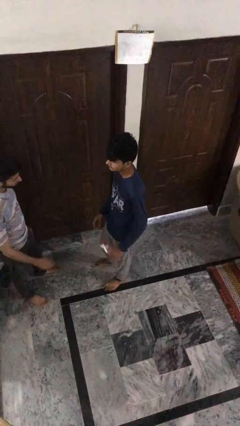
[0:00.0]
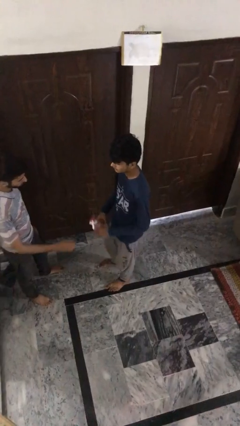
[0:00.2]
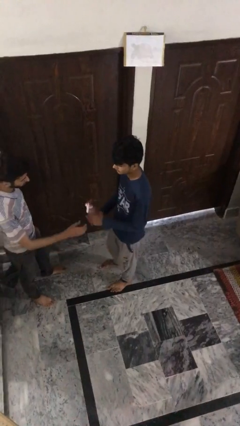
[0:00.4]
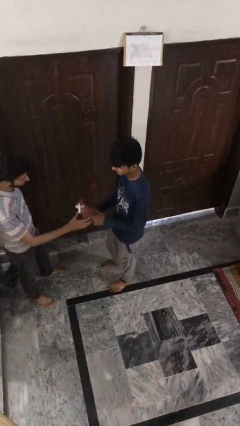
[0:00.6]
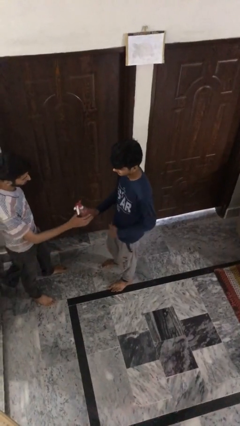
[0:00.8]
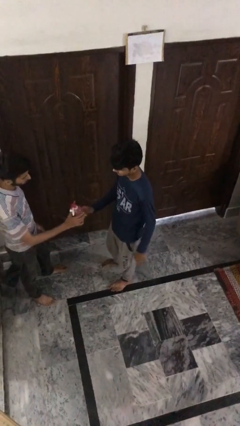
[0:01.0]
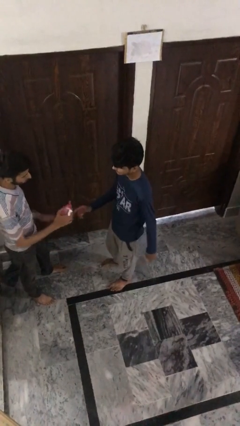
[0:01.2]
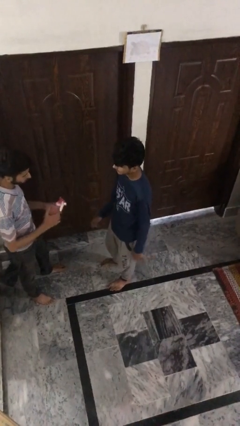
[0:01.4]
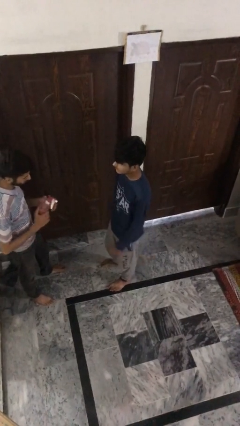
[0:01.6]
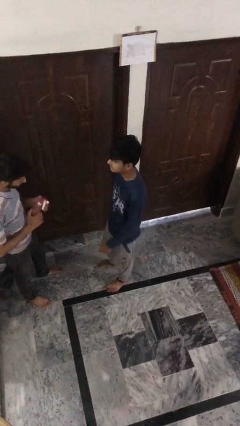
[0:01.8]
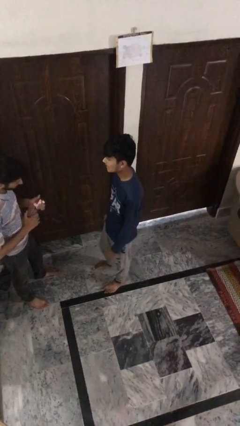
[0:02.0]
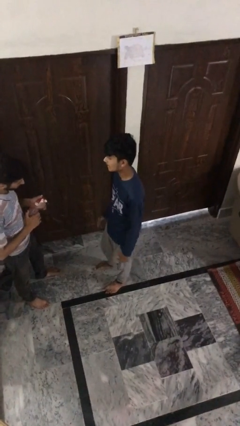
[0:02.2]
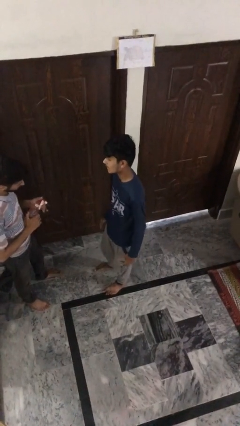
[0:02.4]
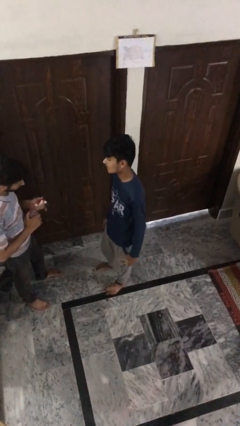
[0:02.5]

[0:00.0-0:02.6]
person transfers object to person

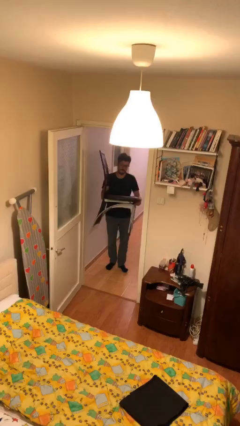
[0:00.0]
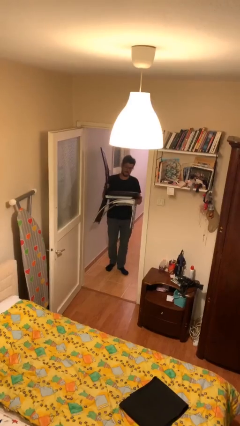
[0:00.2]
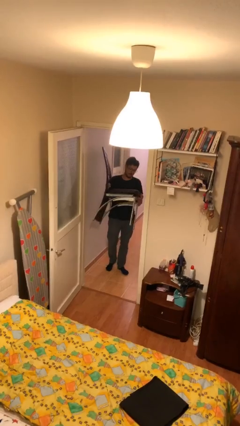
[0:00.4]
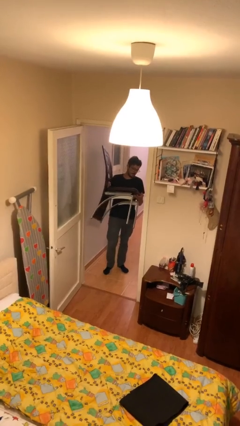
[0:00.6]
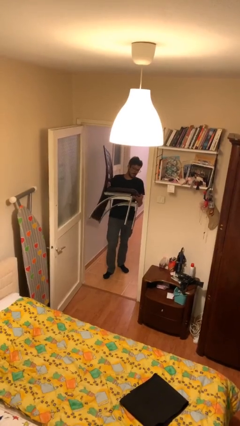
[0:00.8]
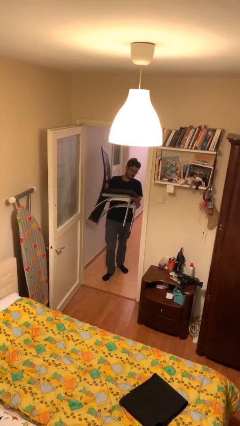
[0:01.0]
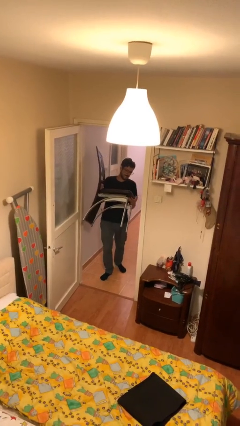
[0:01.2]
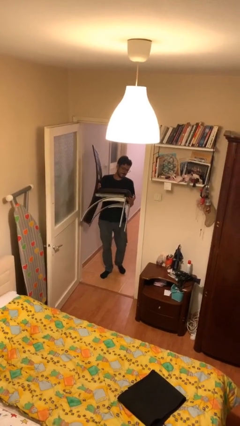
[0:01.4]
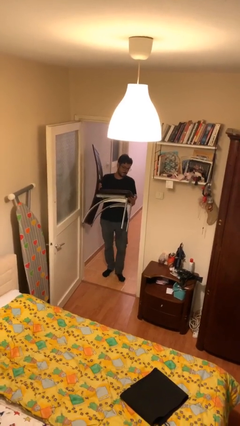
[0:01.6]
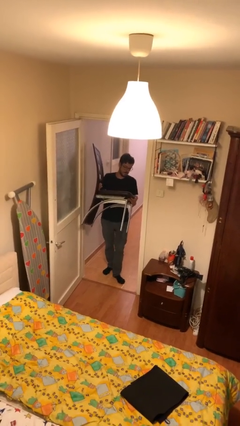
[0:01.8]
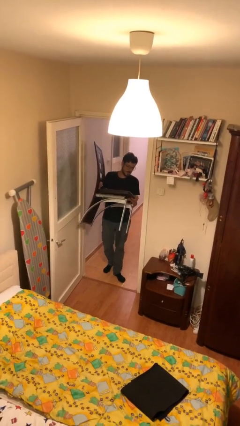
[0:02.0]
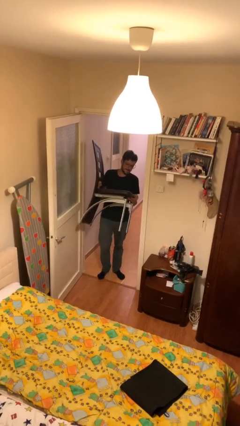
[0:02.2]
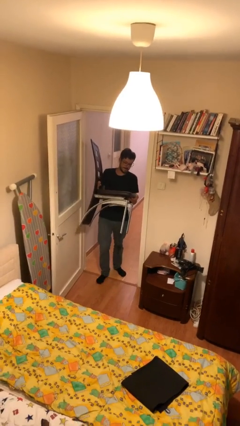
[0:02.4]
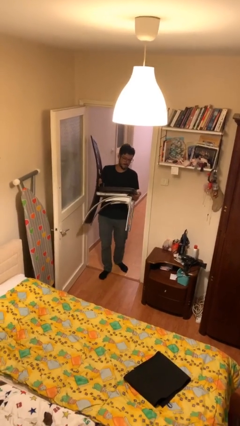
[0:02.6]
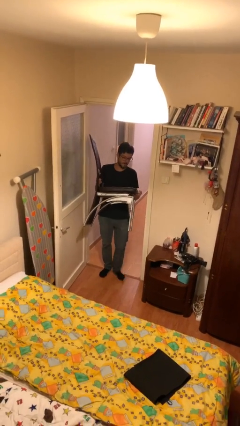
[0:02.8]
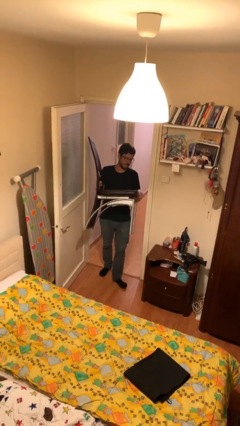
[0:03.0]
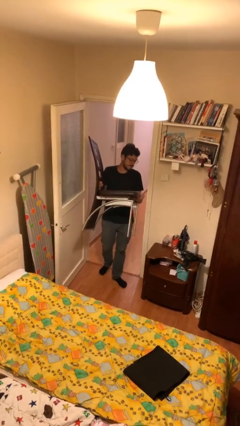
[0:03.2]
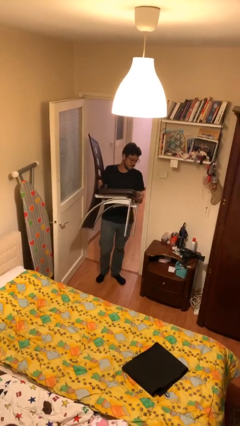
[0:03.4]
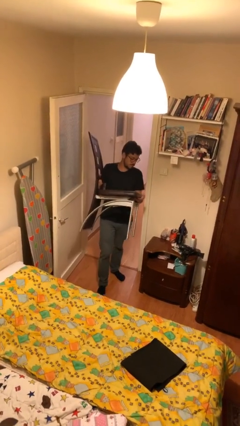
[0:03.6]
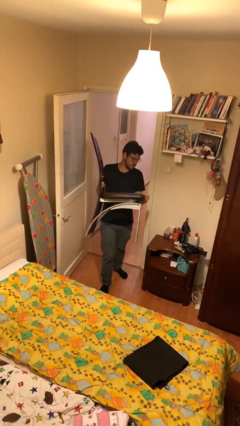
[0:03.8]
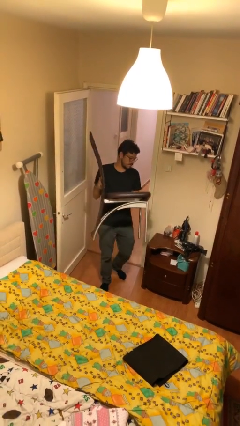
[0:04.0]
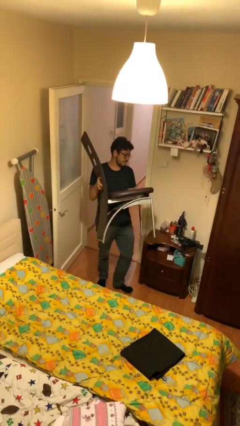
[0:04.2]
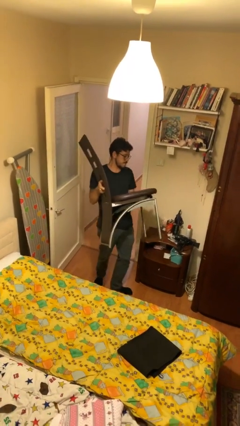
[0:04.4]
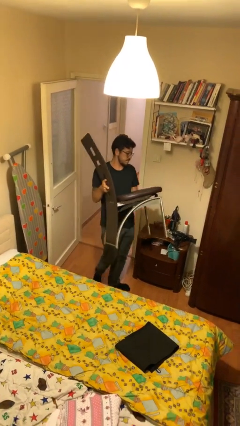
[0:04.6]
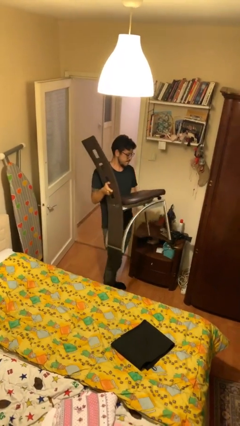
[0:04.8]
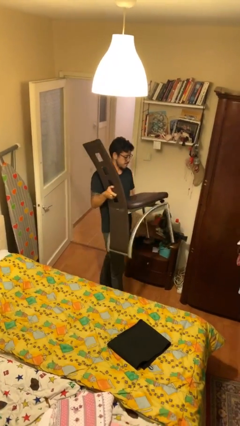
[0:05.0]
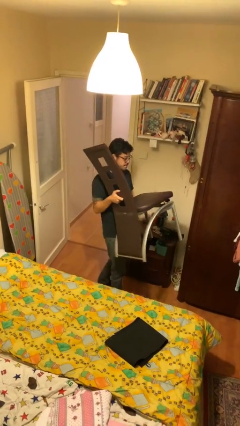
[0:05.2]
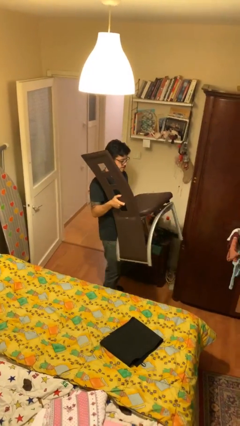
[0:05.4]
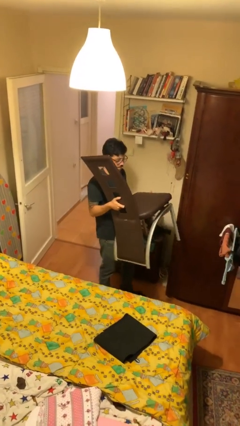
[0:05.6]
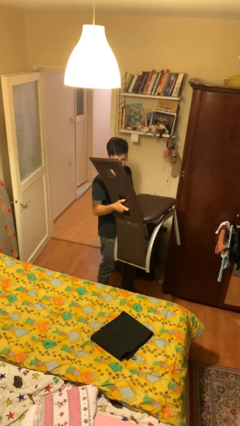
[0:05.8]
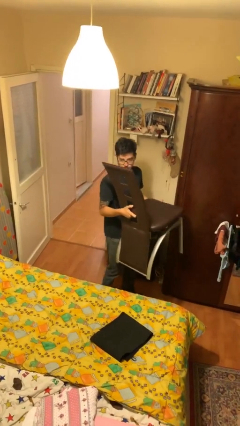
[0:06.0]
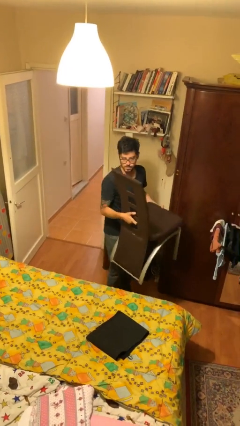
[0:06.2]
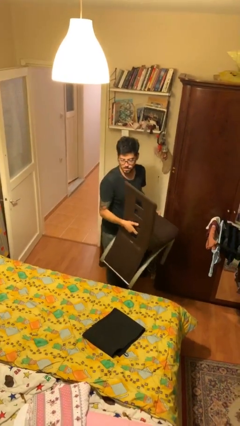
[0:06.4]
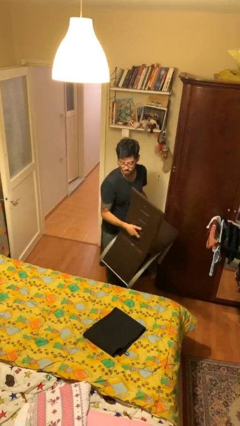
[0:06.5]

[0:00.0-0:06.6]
person carries heavy object

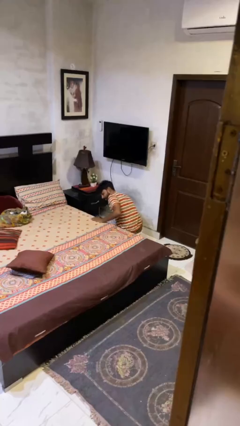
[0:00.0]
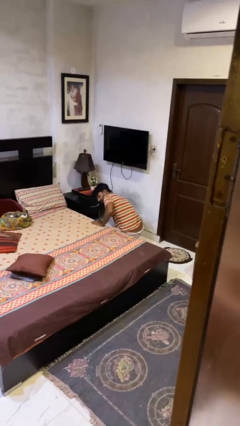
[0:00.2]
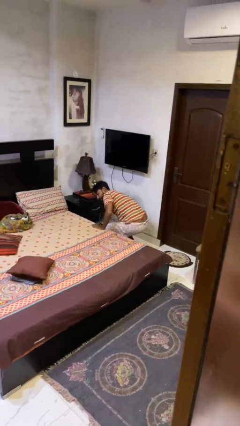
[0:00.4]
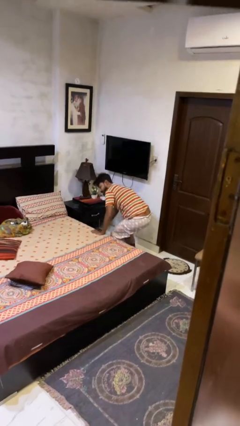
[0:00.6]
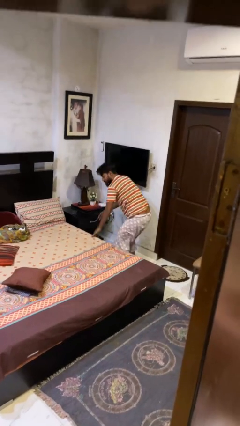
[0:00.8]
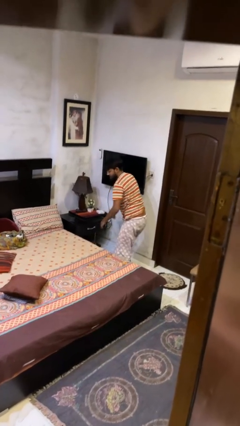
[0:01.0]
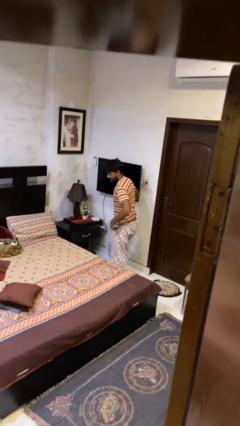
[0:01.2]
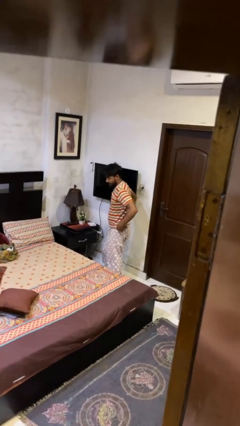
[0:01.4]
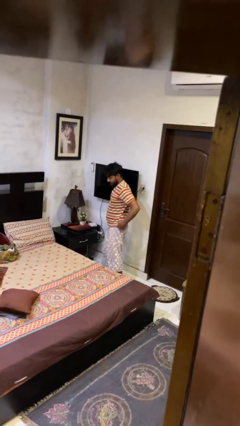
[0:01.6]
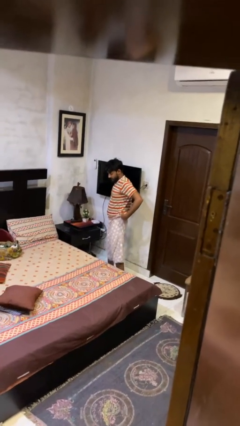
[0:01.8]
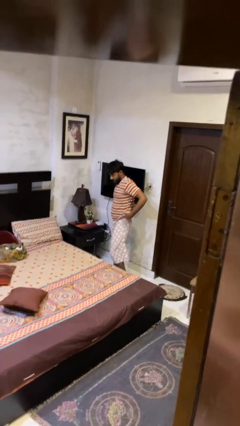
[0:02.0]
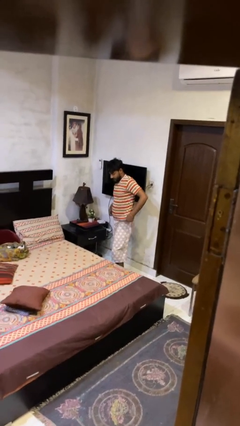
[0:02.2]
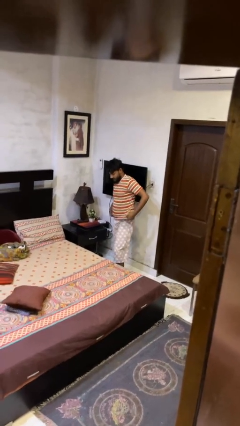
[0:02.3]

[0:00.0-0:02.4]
person stands up from floor

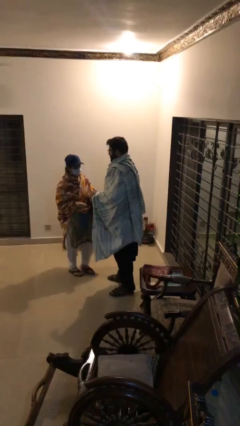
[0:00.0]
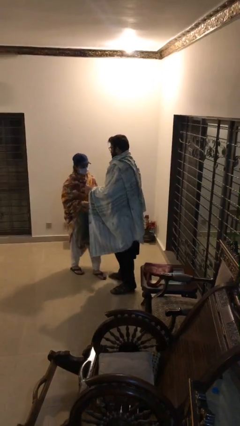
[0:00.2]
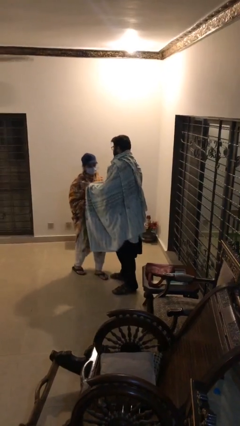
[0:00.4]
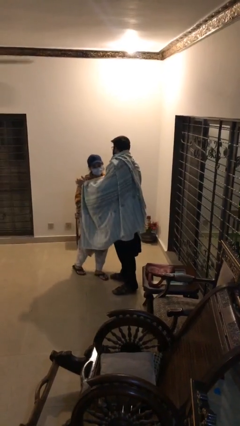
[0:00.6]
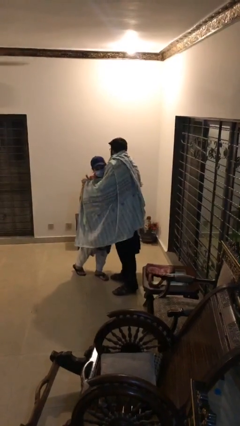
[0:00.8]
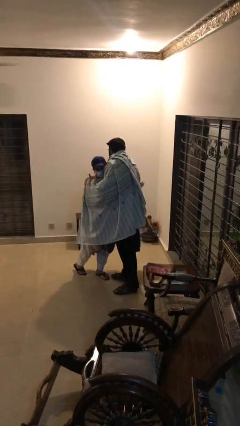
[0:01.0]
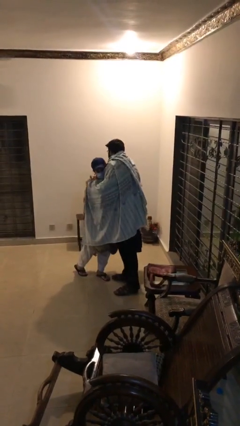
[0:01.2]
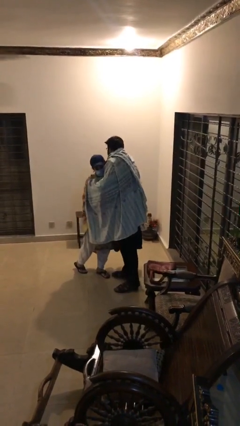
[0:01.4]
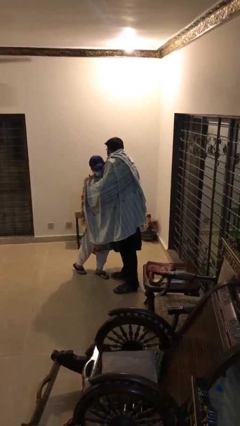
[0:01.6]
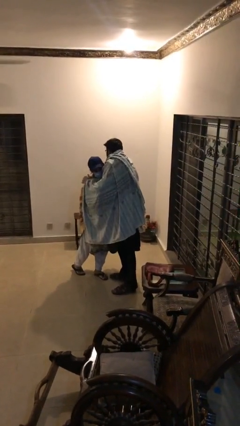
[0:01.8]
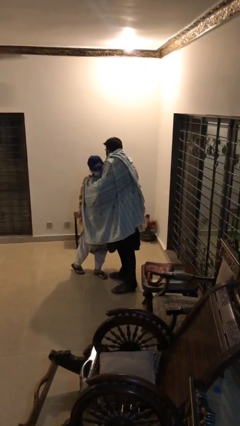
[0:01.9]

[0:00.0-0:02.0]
person embraces person

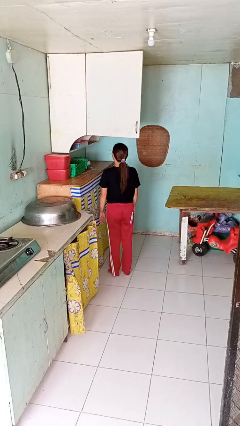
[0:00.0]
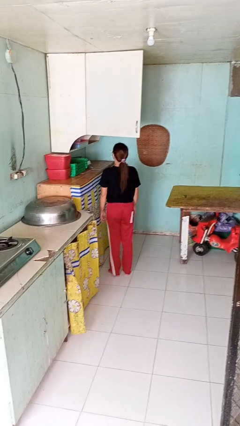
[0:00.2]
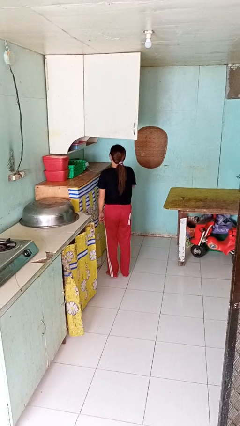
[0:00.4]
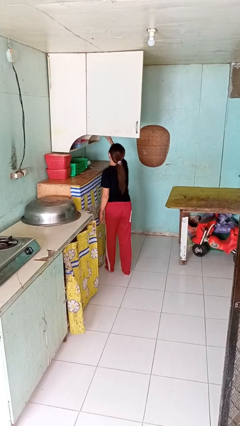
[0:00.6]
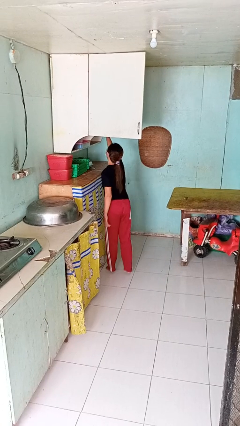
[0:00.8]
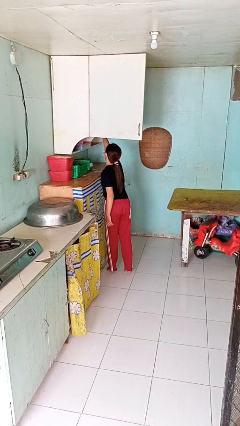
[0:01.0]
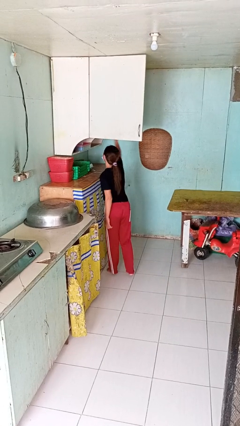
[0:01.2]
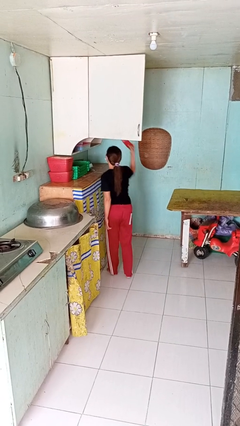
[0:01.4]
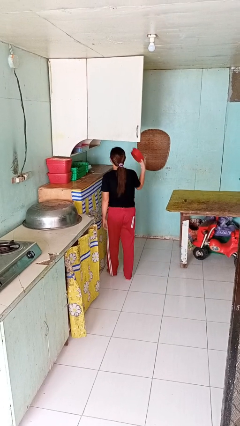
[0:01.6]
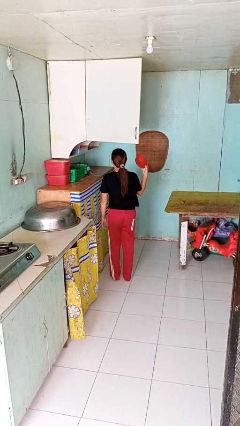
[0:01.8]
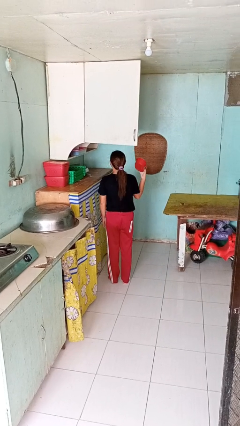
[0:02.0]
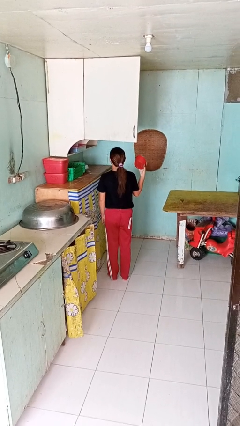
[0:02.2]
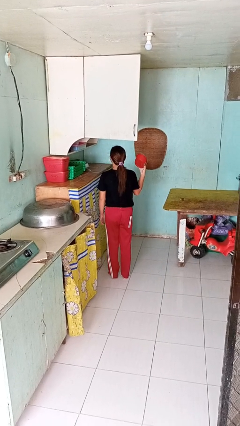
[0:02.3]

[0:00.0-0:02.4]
person takes object from cabinet

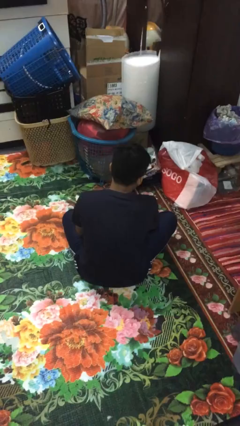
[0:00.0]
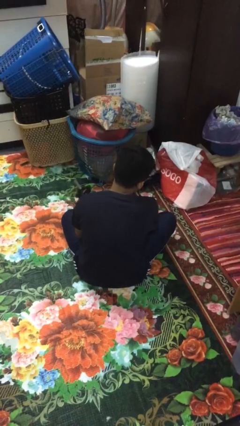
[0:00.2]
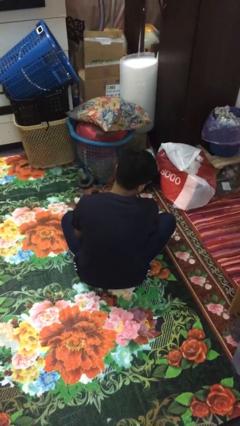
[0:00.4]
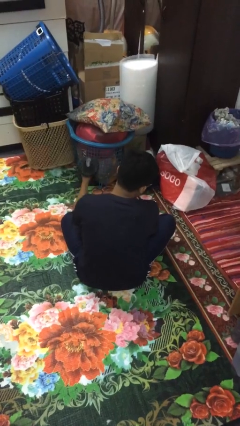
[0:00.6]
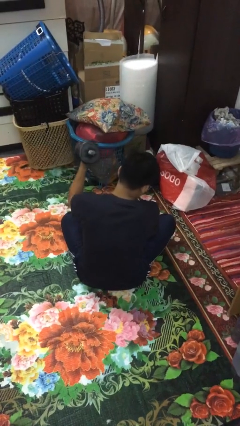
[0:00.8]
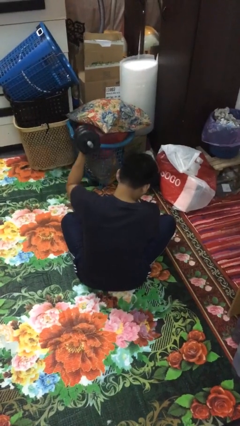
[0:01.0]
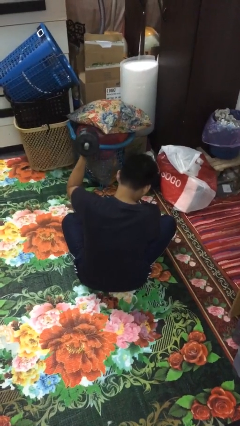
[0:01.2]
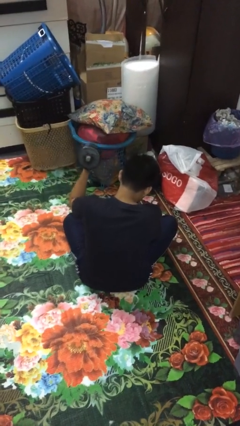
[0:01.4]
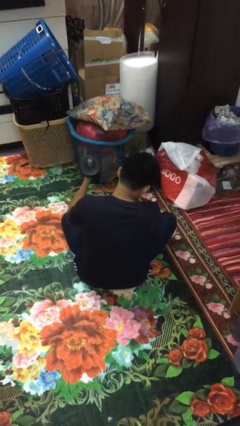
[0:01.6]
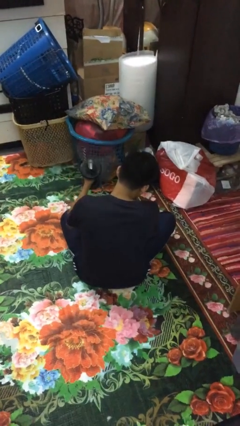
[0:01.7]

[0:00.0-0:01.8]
person lifts dumbbells
